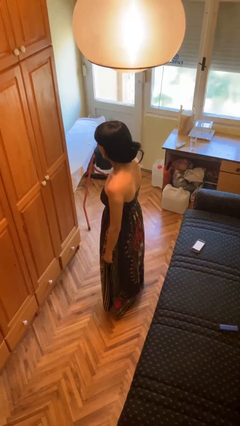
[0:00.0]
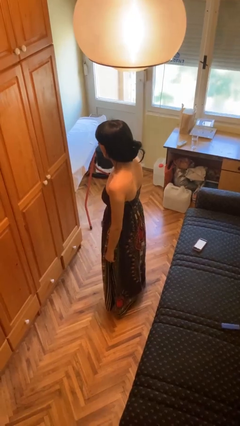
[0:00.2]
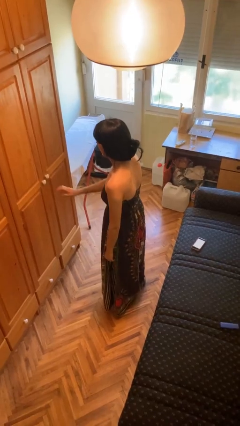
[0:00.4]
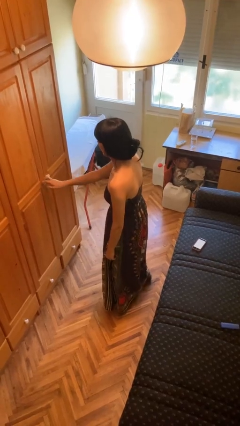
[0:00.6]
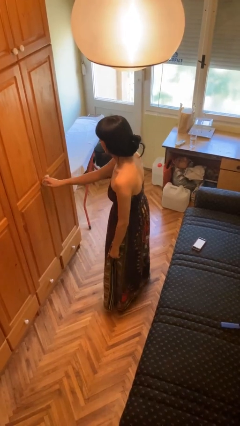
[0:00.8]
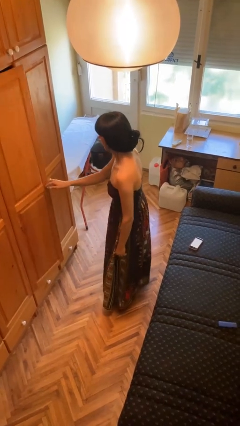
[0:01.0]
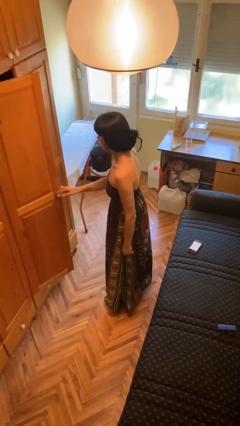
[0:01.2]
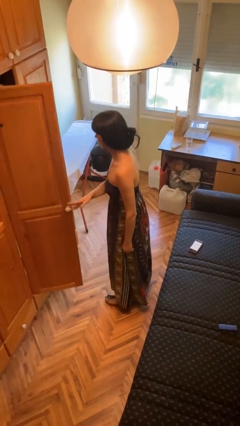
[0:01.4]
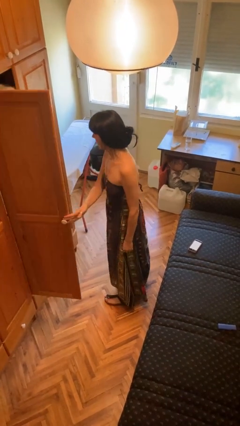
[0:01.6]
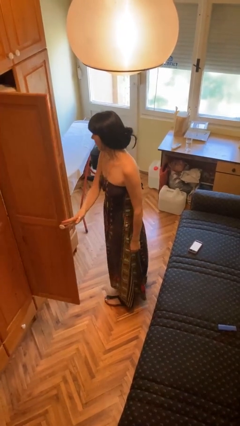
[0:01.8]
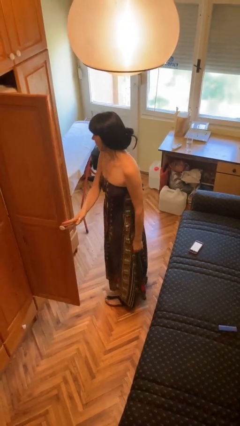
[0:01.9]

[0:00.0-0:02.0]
person opens closet door

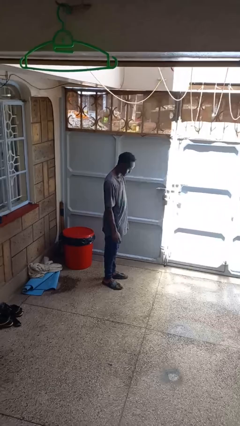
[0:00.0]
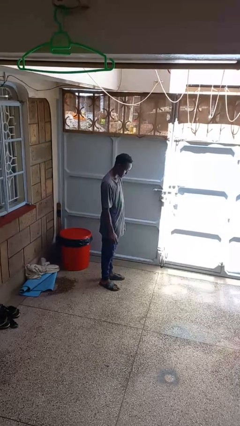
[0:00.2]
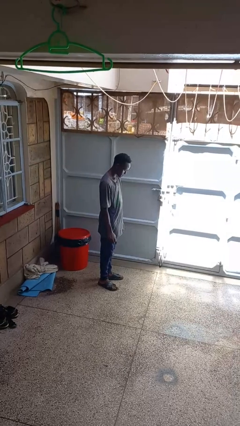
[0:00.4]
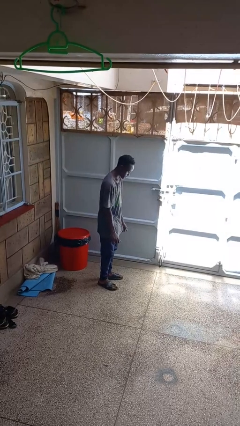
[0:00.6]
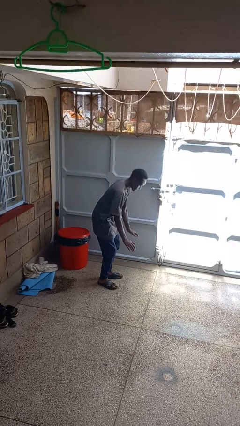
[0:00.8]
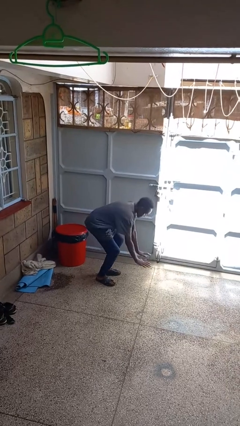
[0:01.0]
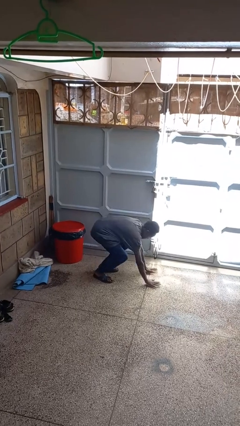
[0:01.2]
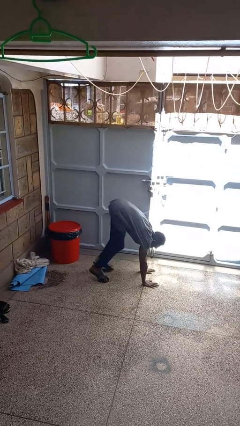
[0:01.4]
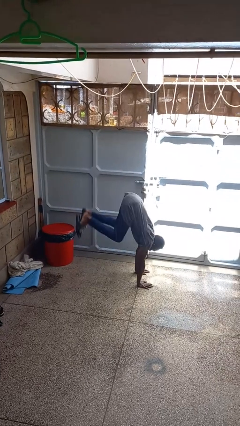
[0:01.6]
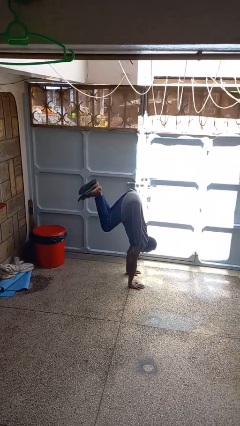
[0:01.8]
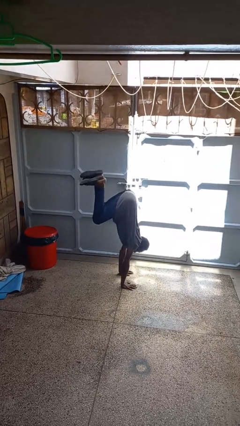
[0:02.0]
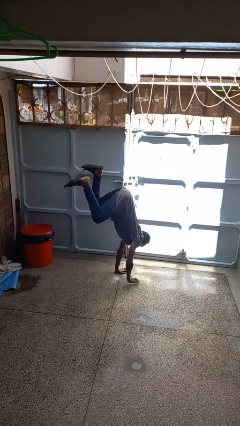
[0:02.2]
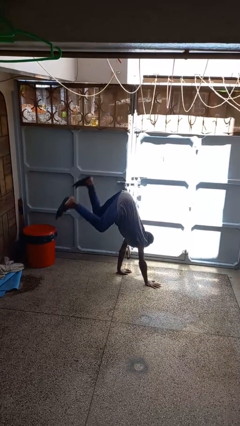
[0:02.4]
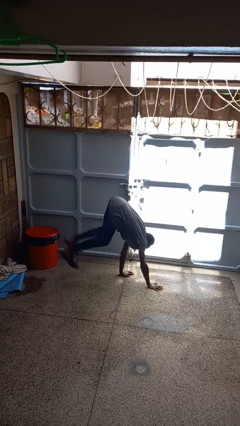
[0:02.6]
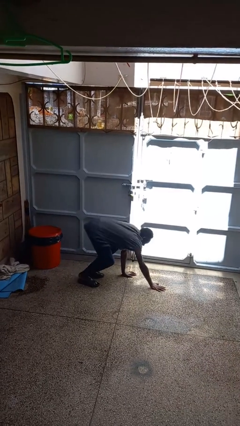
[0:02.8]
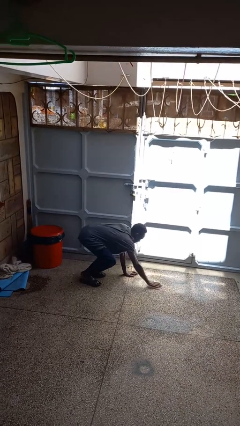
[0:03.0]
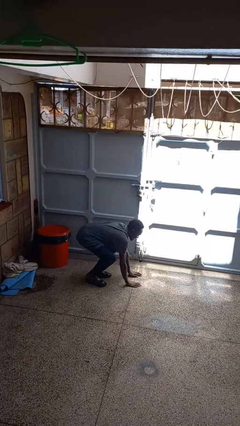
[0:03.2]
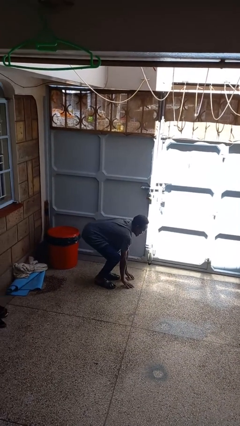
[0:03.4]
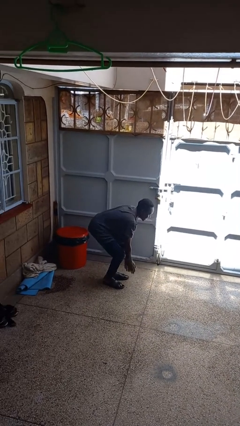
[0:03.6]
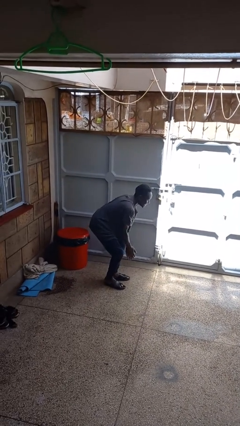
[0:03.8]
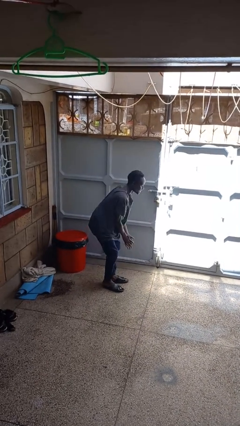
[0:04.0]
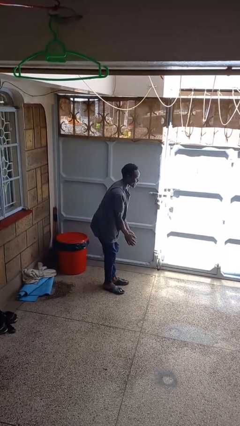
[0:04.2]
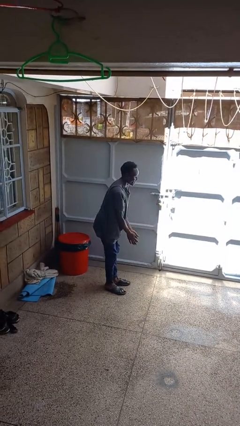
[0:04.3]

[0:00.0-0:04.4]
person handstand

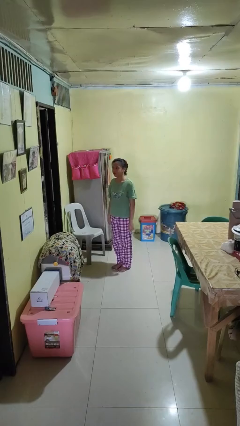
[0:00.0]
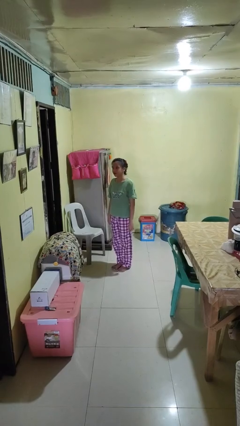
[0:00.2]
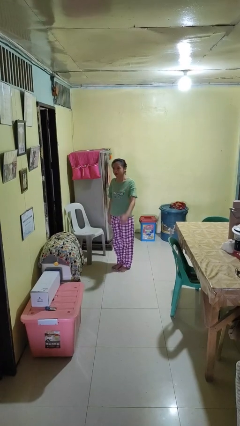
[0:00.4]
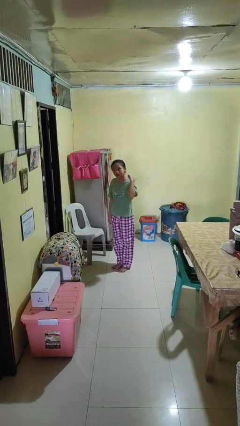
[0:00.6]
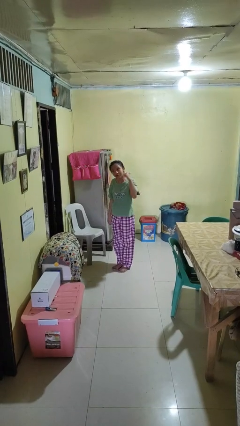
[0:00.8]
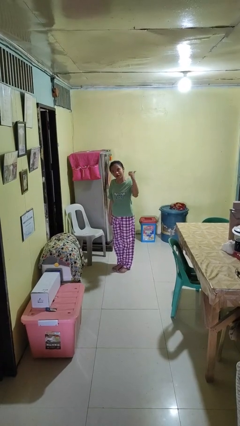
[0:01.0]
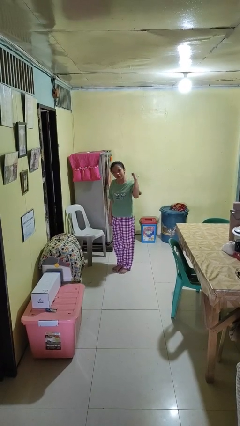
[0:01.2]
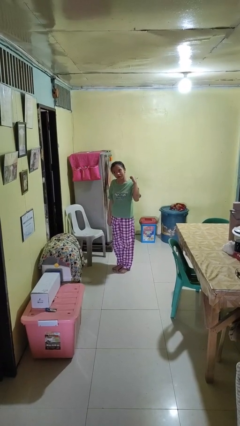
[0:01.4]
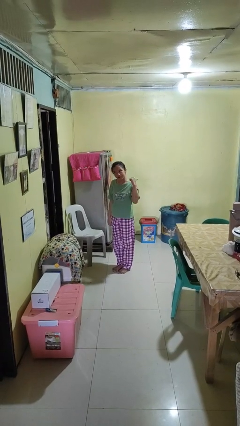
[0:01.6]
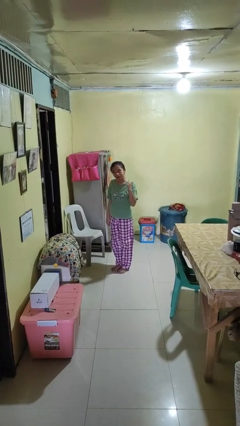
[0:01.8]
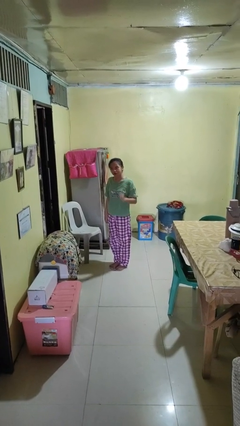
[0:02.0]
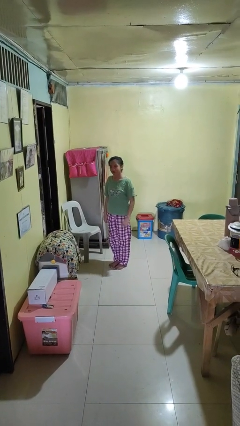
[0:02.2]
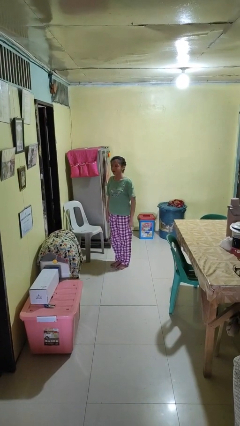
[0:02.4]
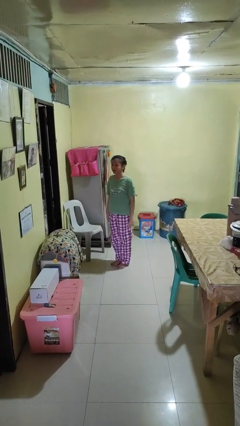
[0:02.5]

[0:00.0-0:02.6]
person gestures behind me

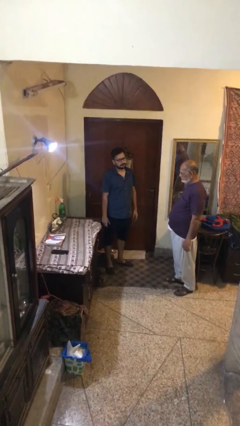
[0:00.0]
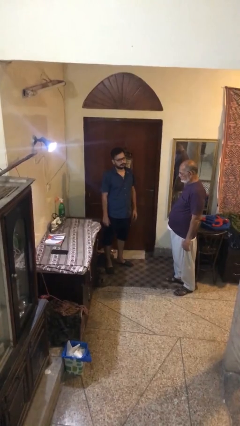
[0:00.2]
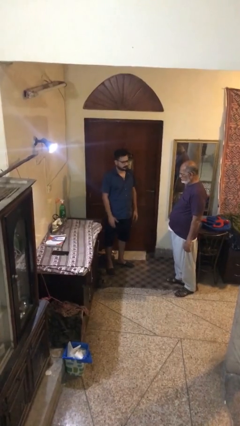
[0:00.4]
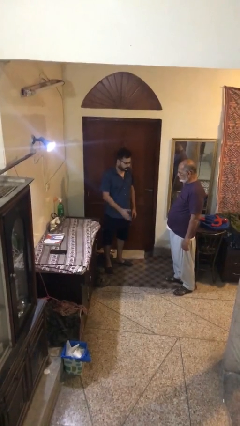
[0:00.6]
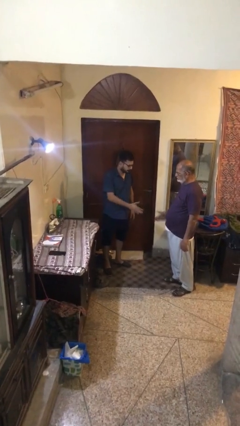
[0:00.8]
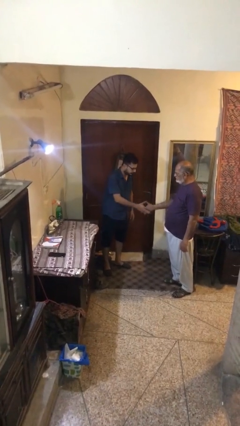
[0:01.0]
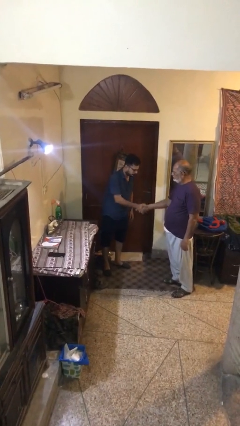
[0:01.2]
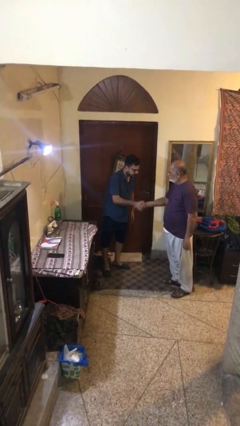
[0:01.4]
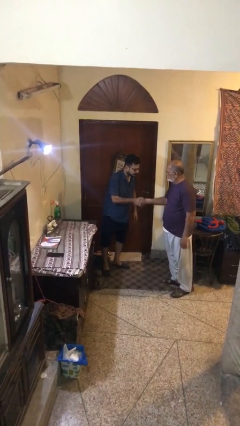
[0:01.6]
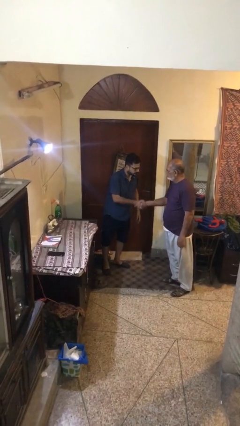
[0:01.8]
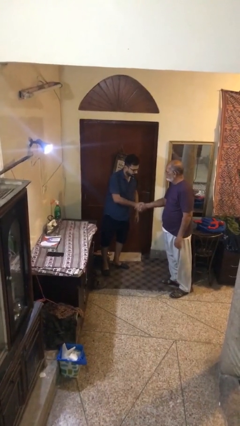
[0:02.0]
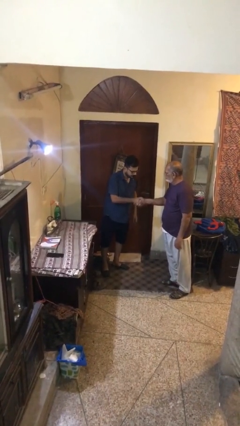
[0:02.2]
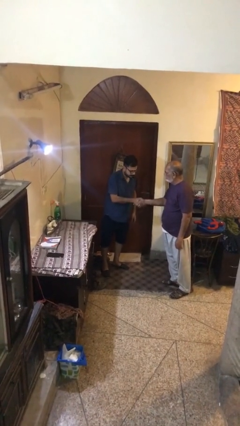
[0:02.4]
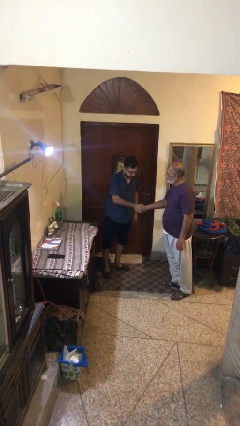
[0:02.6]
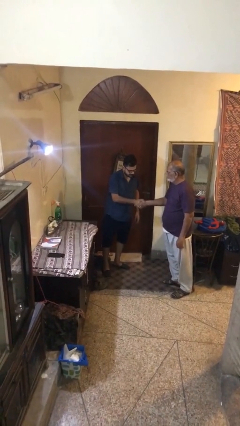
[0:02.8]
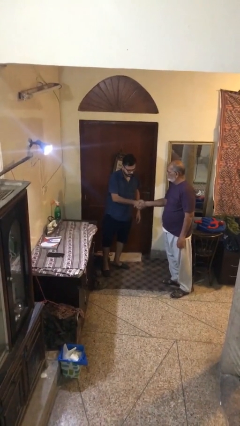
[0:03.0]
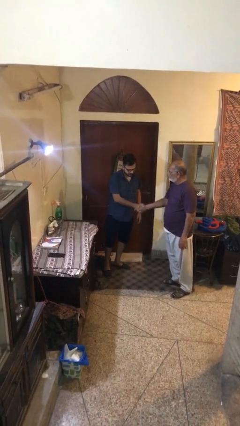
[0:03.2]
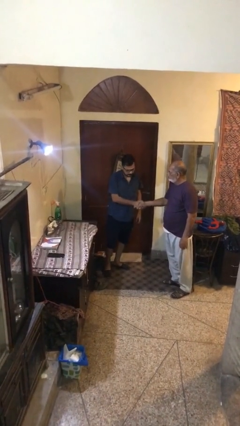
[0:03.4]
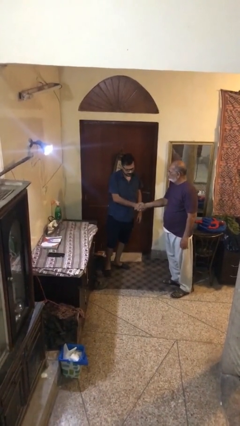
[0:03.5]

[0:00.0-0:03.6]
person shakes hand

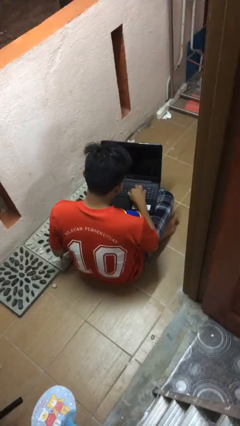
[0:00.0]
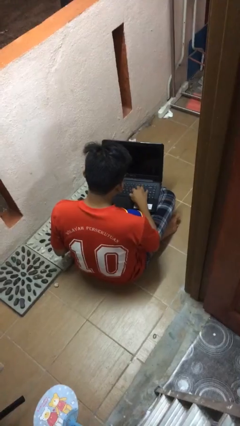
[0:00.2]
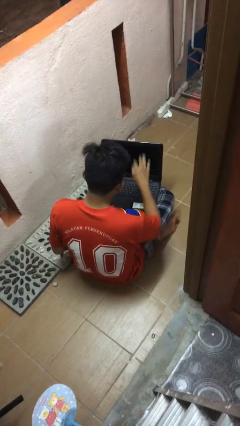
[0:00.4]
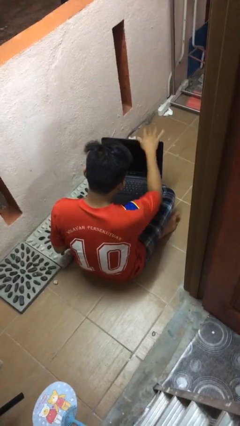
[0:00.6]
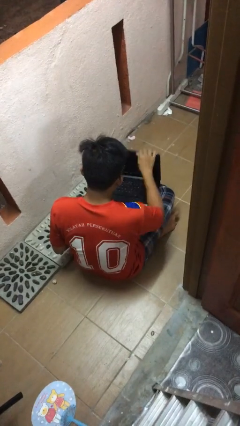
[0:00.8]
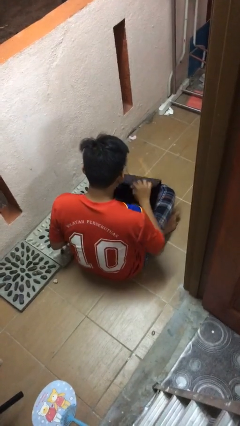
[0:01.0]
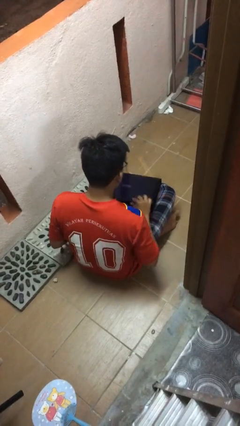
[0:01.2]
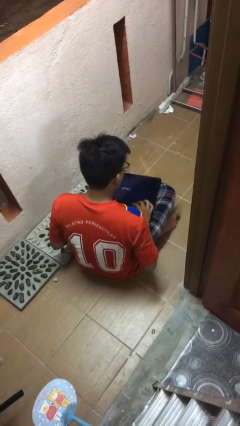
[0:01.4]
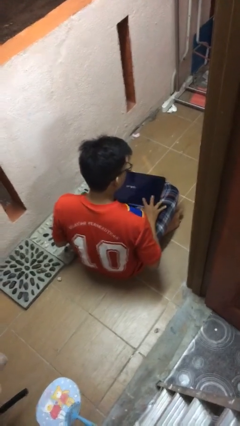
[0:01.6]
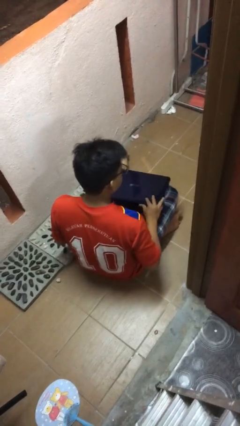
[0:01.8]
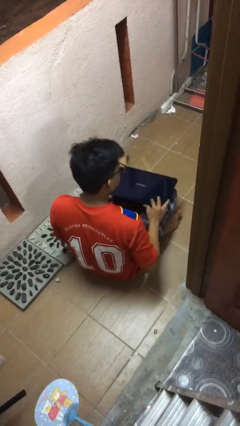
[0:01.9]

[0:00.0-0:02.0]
person closes laptop

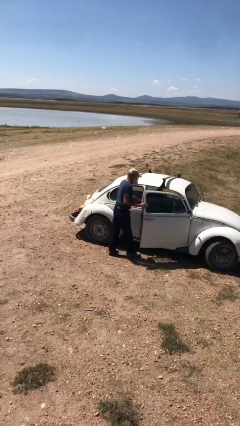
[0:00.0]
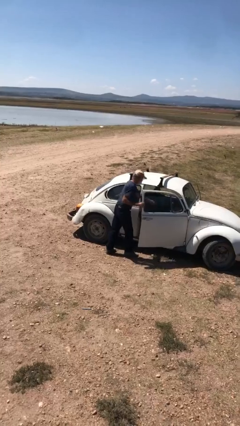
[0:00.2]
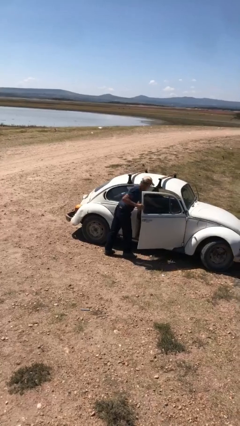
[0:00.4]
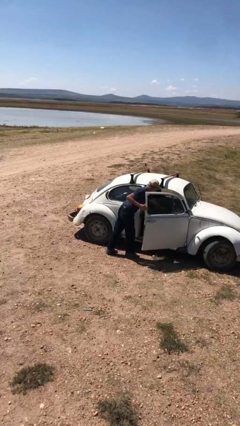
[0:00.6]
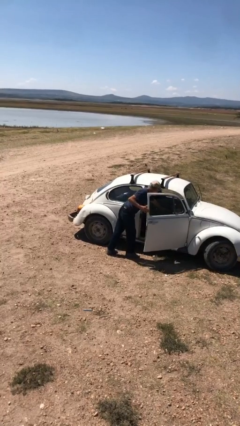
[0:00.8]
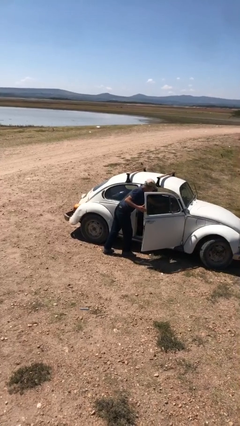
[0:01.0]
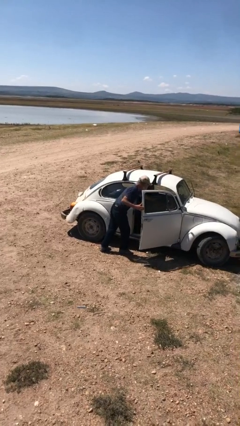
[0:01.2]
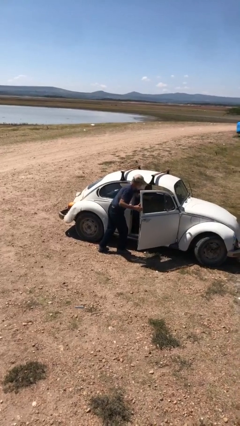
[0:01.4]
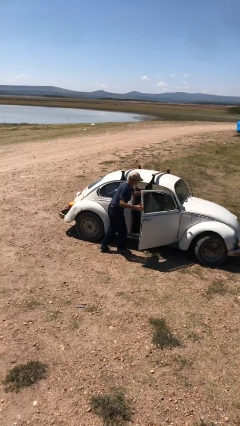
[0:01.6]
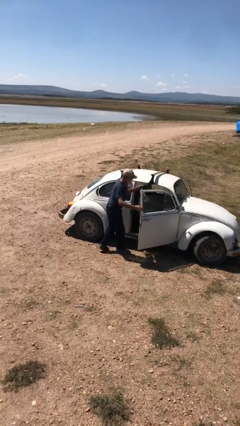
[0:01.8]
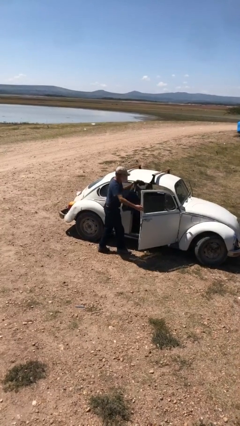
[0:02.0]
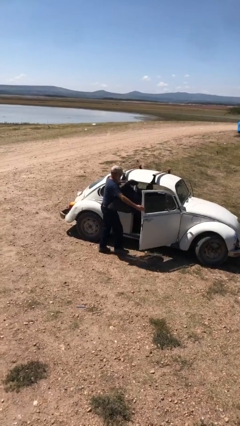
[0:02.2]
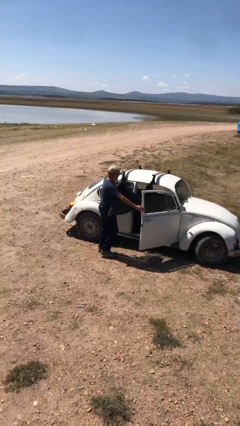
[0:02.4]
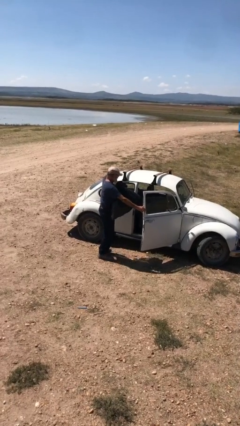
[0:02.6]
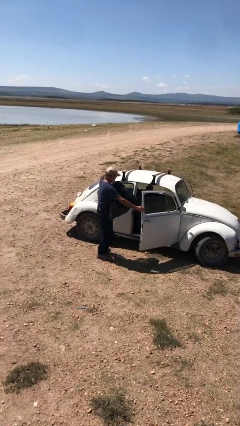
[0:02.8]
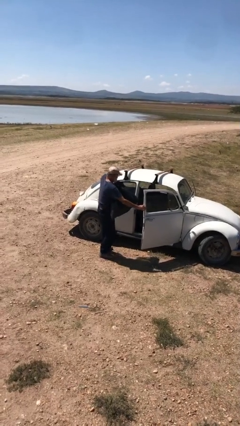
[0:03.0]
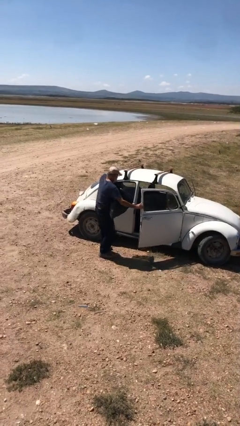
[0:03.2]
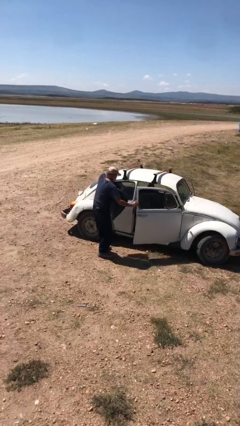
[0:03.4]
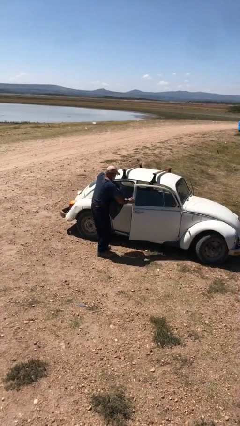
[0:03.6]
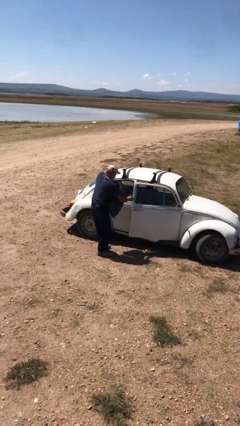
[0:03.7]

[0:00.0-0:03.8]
person unloads car
